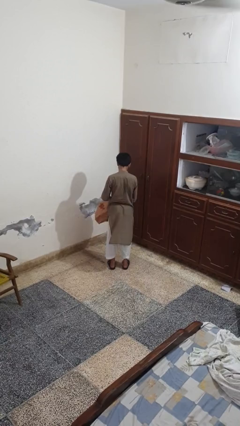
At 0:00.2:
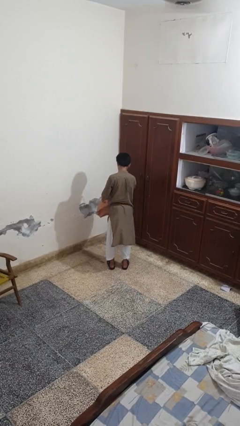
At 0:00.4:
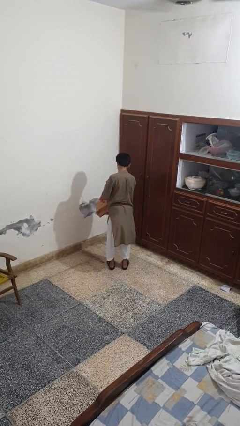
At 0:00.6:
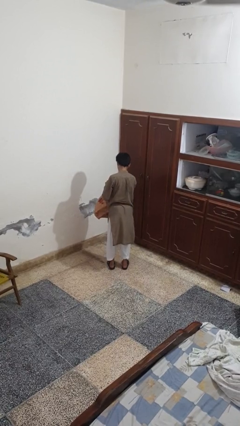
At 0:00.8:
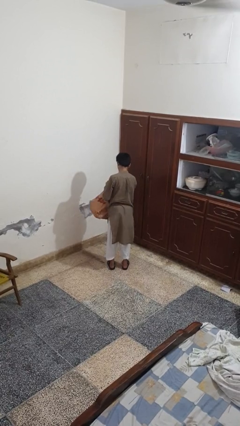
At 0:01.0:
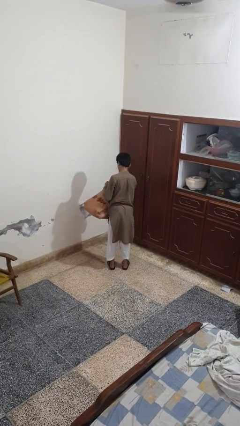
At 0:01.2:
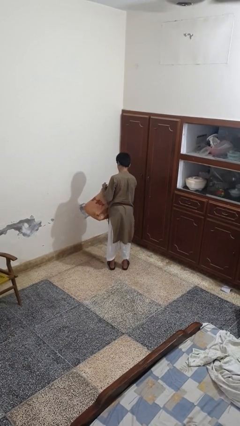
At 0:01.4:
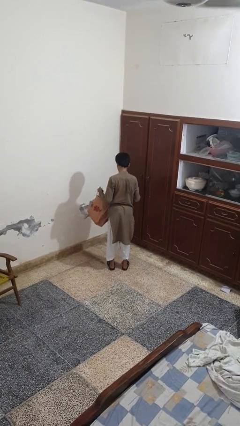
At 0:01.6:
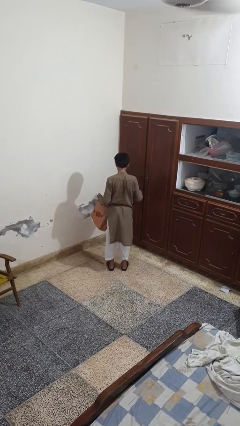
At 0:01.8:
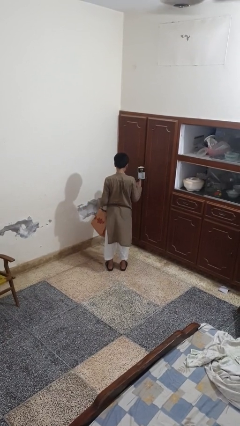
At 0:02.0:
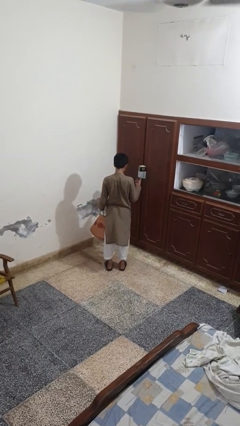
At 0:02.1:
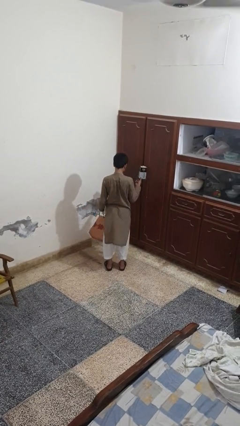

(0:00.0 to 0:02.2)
person takes object from bag

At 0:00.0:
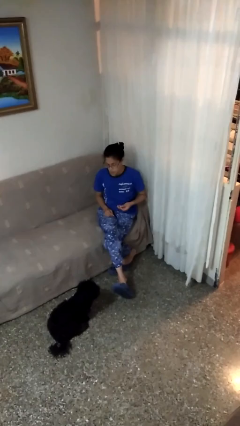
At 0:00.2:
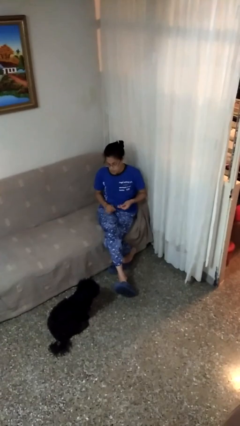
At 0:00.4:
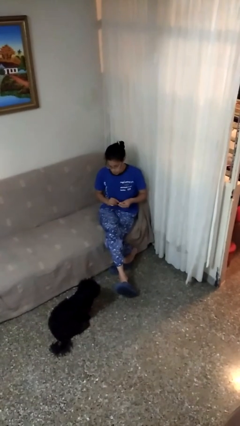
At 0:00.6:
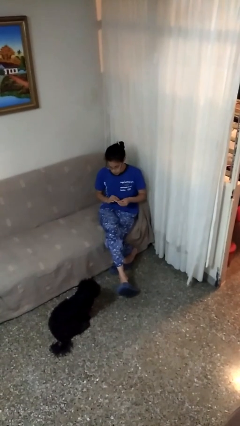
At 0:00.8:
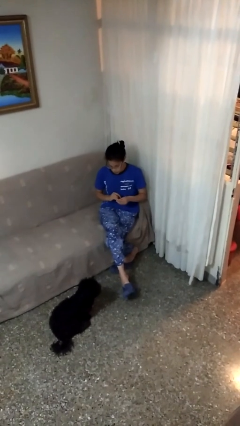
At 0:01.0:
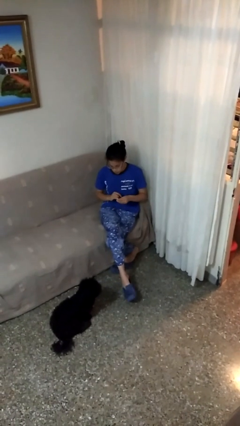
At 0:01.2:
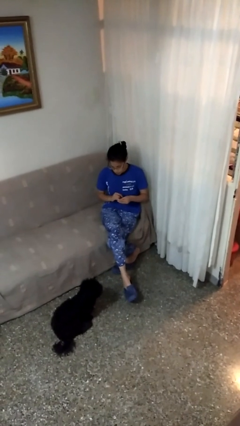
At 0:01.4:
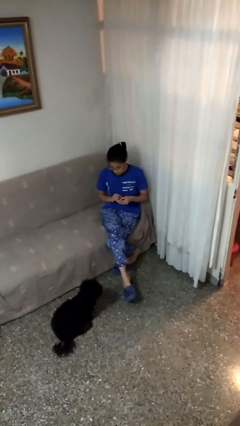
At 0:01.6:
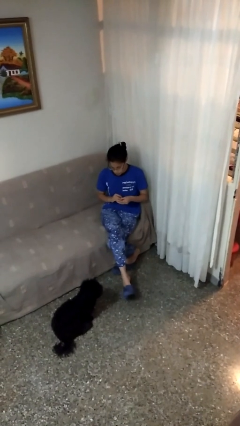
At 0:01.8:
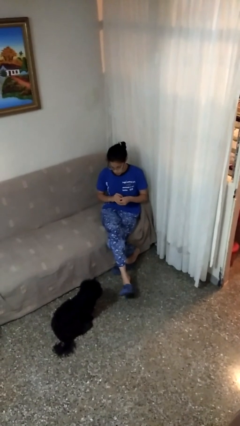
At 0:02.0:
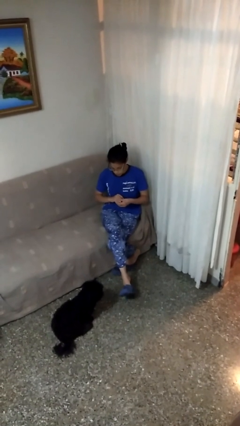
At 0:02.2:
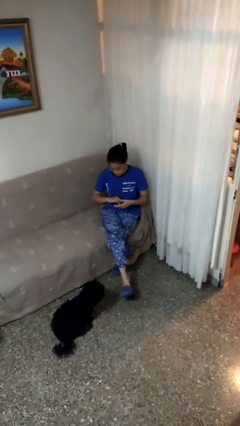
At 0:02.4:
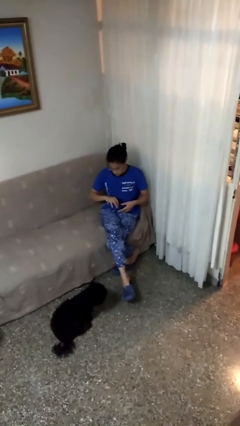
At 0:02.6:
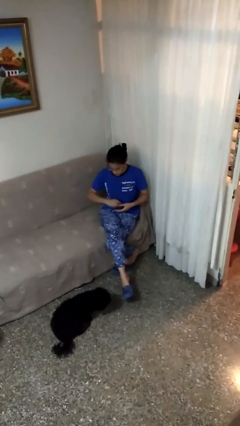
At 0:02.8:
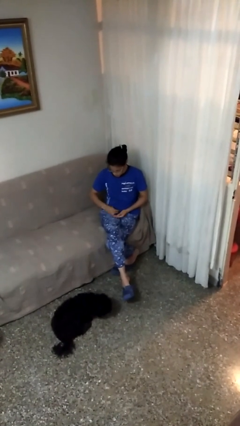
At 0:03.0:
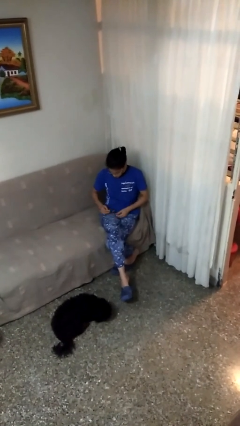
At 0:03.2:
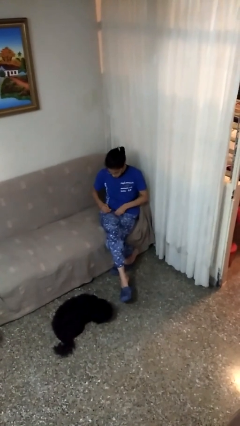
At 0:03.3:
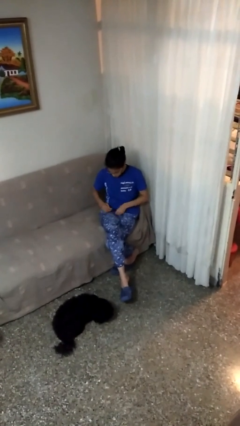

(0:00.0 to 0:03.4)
person puts on ring

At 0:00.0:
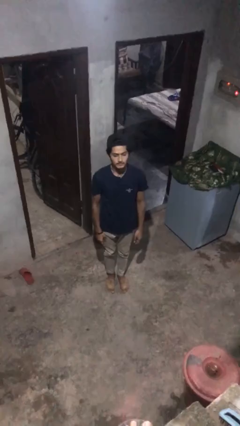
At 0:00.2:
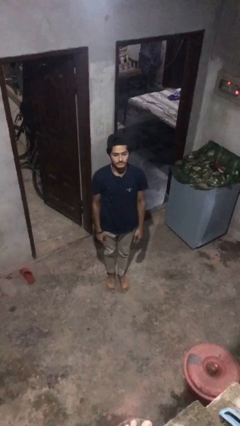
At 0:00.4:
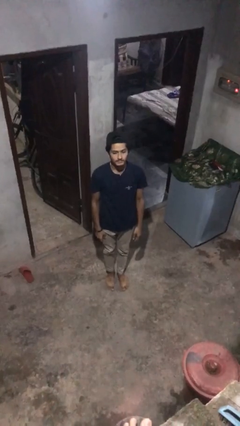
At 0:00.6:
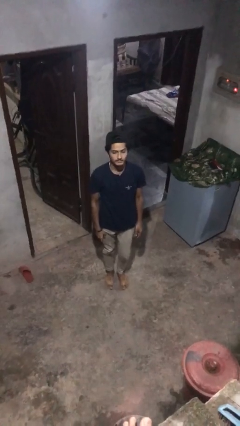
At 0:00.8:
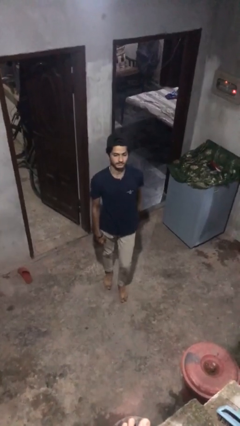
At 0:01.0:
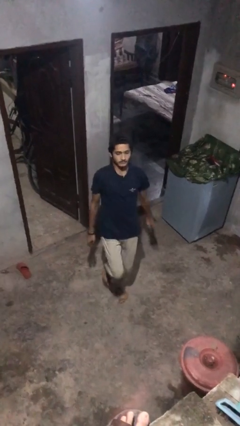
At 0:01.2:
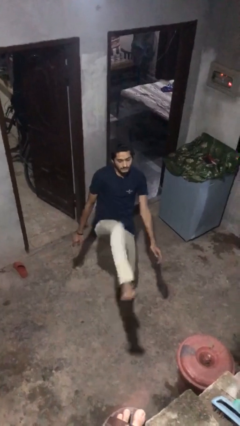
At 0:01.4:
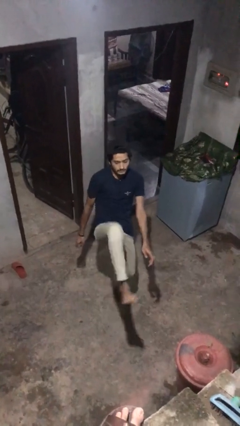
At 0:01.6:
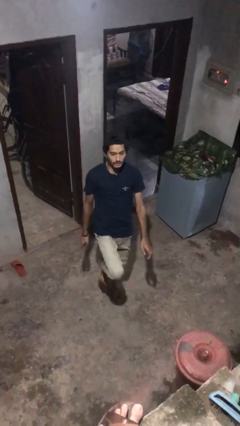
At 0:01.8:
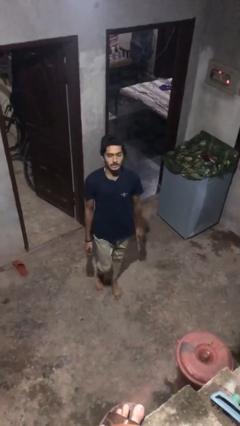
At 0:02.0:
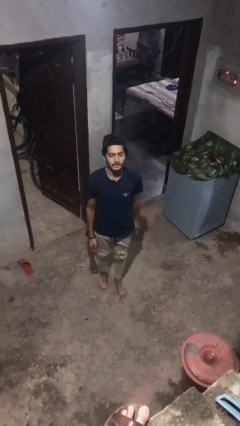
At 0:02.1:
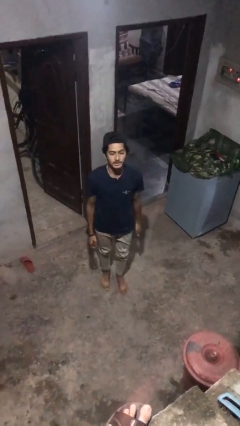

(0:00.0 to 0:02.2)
person karate kicks

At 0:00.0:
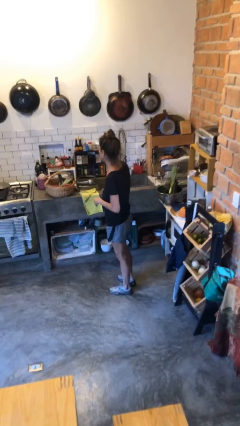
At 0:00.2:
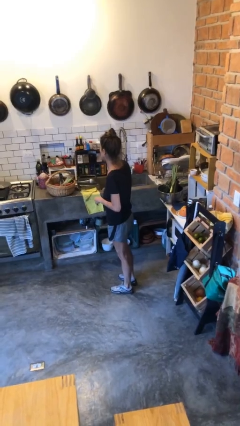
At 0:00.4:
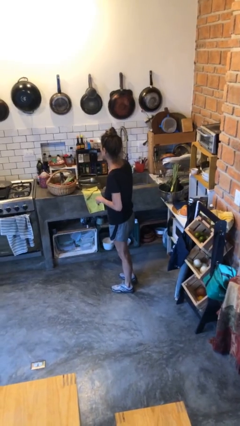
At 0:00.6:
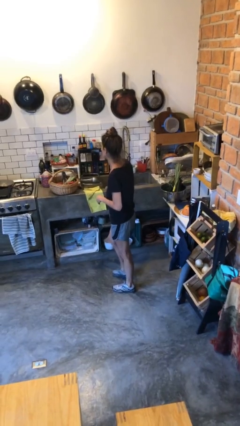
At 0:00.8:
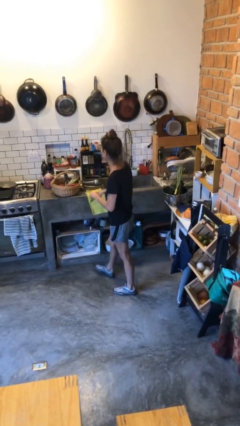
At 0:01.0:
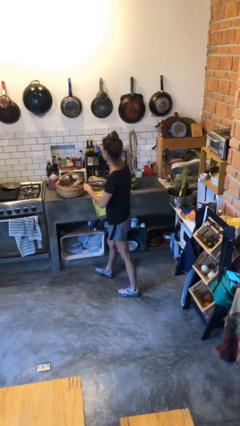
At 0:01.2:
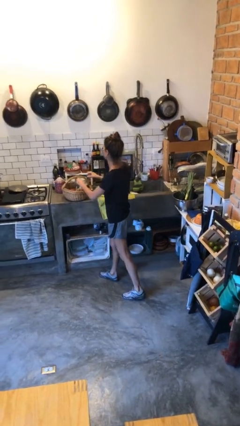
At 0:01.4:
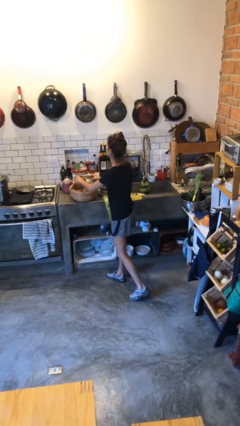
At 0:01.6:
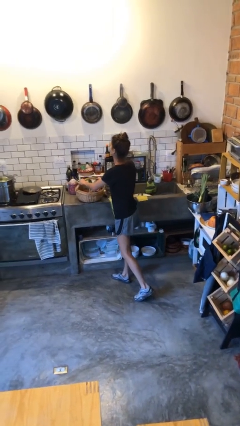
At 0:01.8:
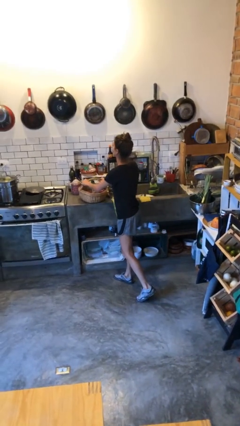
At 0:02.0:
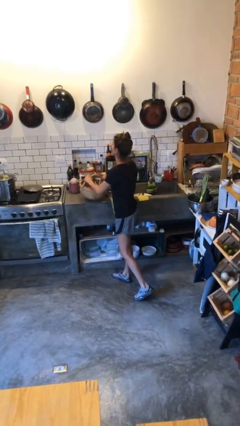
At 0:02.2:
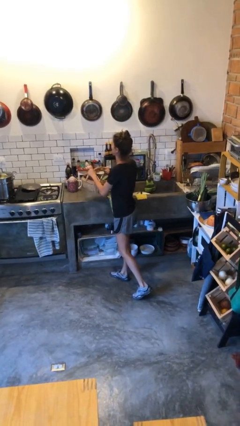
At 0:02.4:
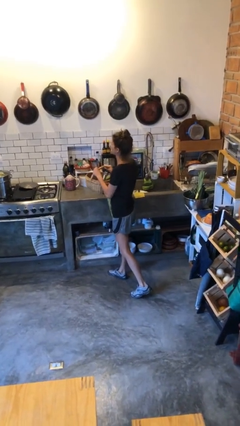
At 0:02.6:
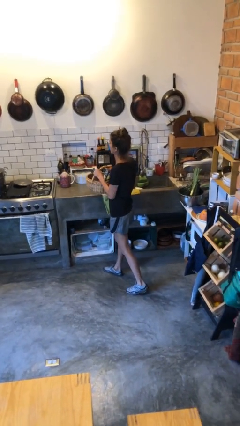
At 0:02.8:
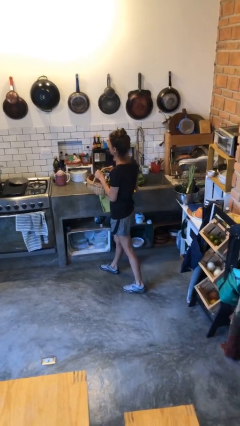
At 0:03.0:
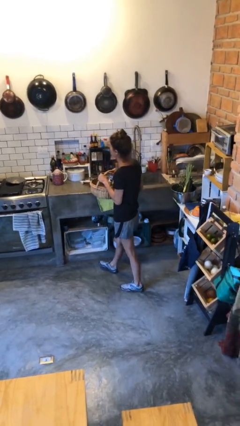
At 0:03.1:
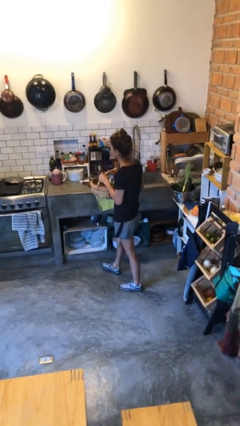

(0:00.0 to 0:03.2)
person picks up object from countertop

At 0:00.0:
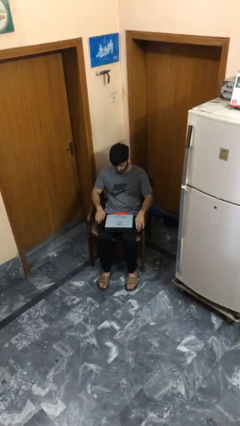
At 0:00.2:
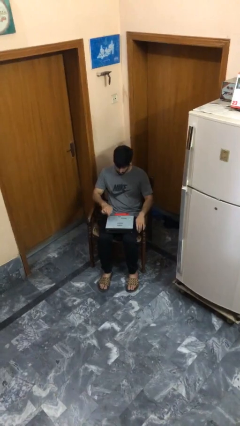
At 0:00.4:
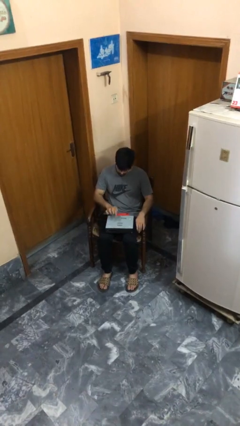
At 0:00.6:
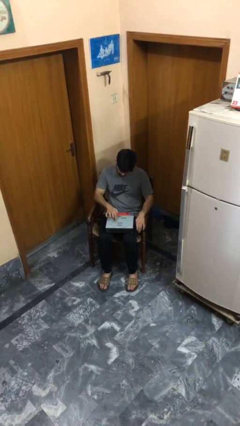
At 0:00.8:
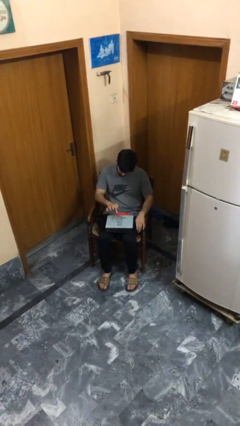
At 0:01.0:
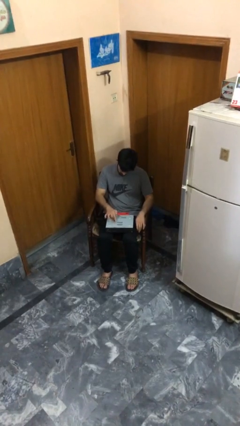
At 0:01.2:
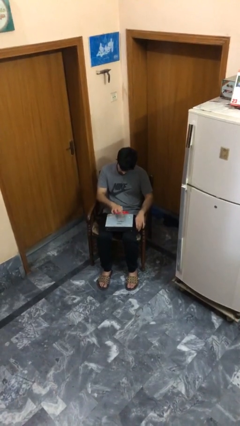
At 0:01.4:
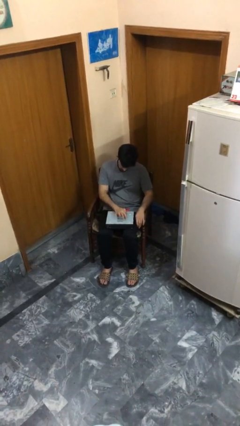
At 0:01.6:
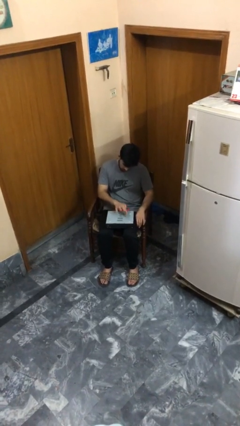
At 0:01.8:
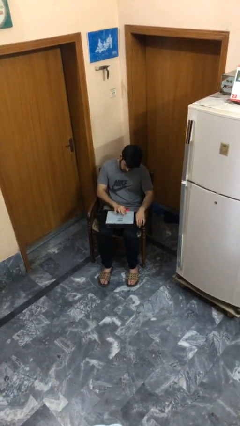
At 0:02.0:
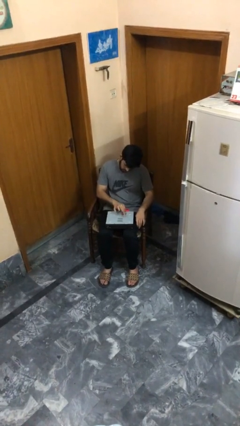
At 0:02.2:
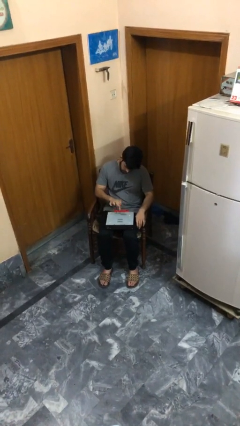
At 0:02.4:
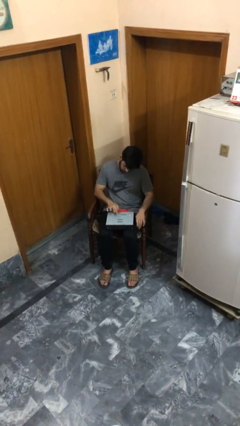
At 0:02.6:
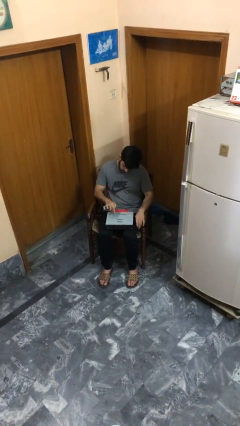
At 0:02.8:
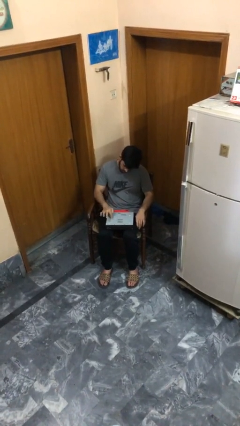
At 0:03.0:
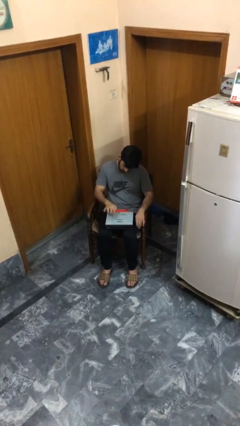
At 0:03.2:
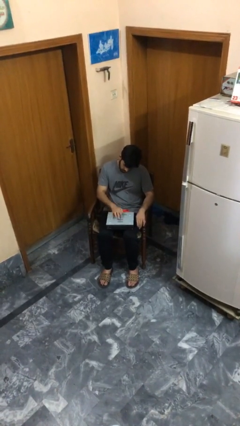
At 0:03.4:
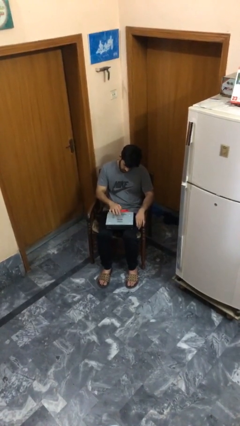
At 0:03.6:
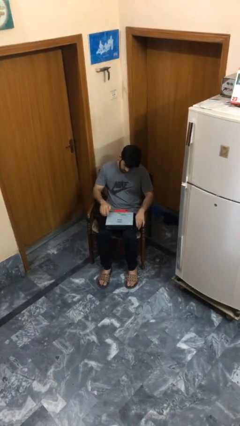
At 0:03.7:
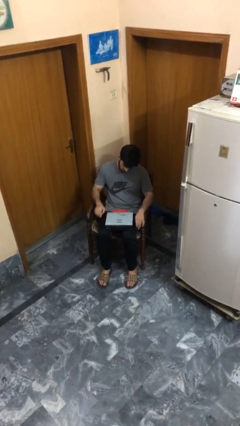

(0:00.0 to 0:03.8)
person taps object with finger

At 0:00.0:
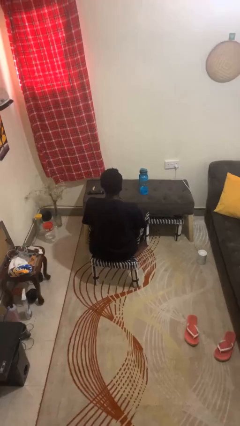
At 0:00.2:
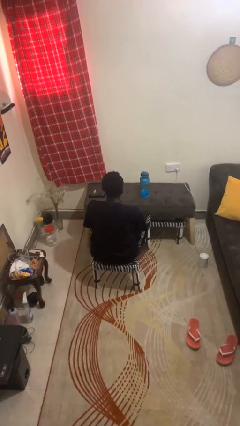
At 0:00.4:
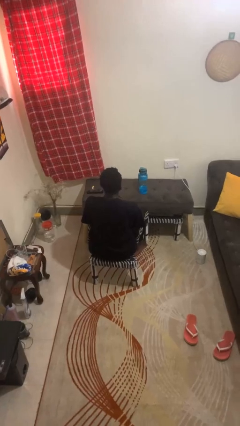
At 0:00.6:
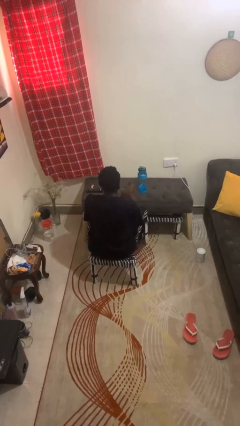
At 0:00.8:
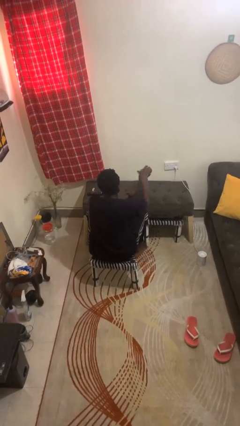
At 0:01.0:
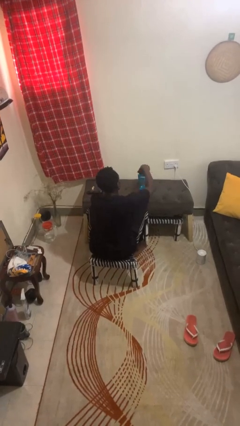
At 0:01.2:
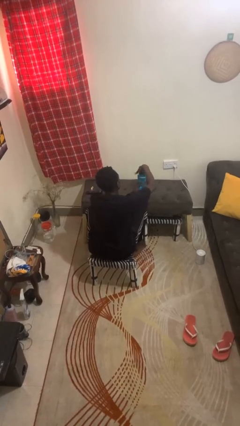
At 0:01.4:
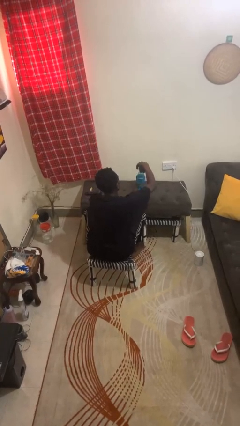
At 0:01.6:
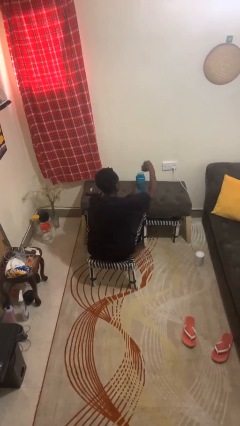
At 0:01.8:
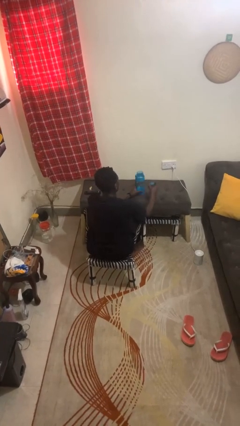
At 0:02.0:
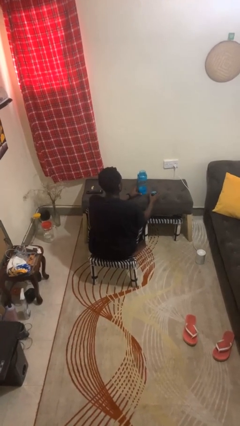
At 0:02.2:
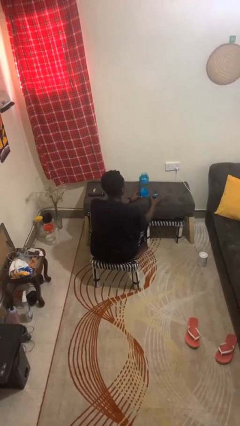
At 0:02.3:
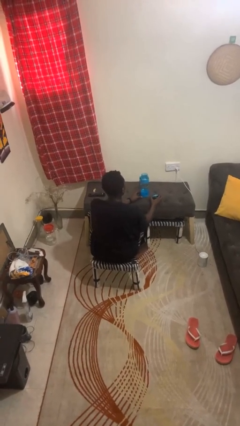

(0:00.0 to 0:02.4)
person opens jar
